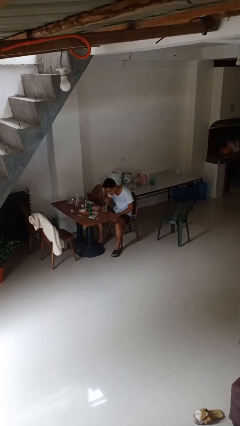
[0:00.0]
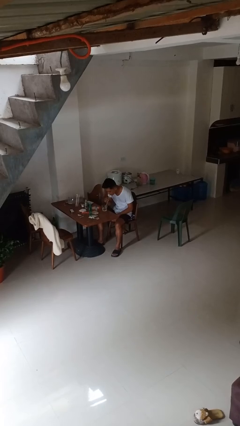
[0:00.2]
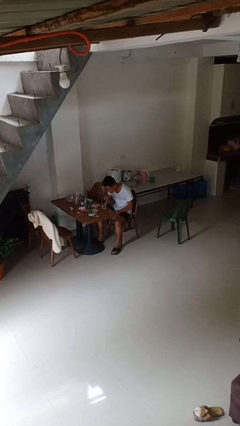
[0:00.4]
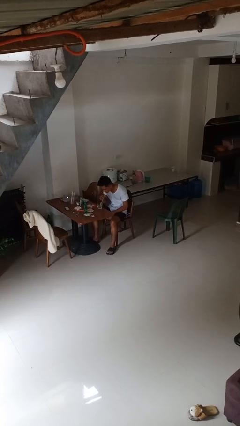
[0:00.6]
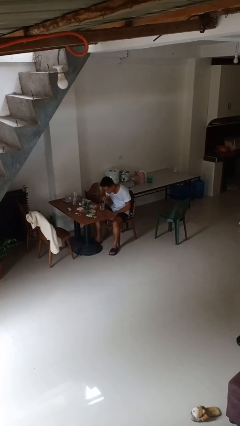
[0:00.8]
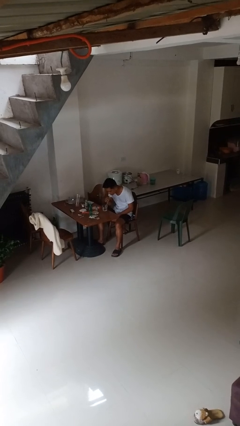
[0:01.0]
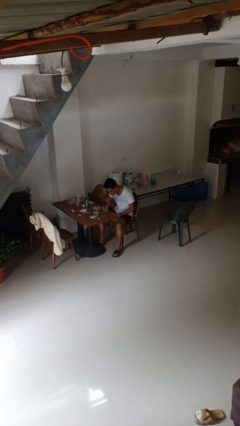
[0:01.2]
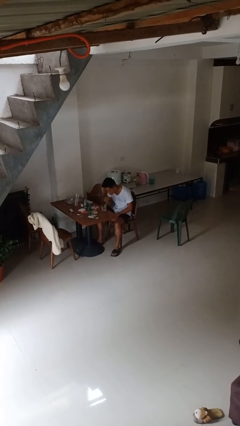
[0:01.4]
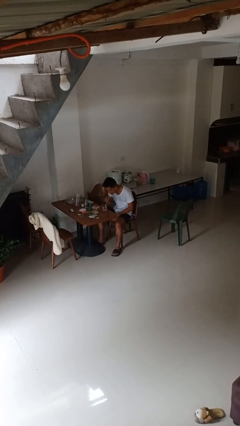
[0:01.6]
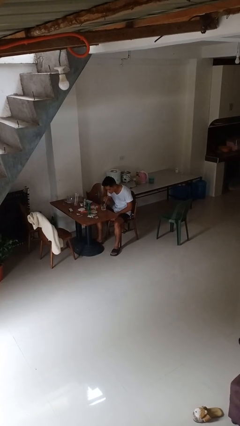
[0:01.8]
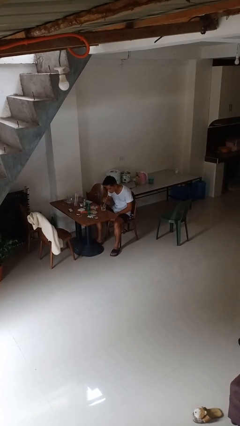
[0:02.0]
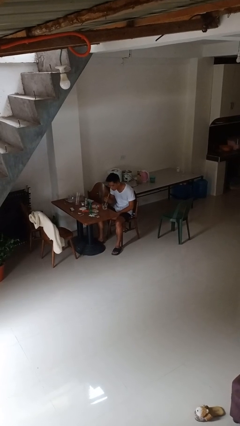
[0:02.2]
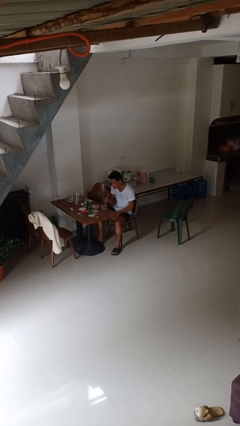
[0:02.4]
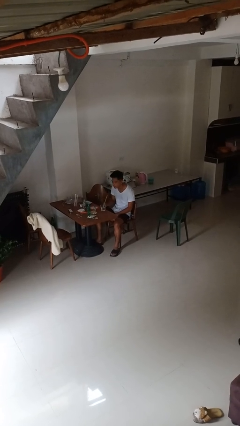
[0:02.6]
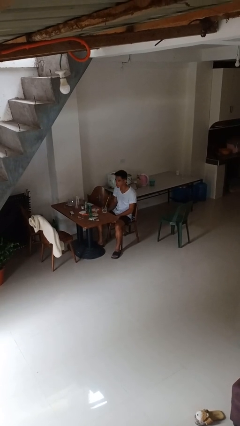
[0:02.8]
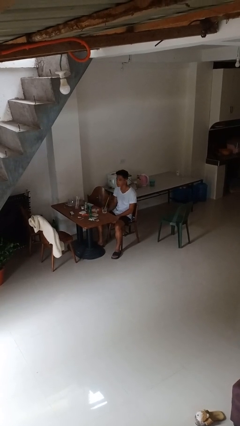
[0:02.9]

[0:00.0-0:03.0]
person drinks from straw

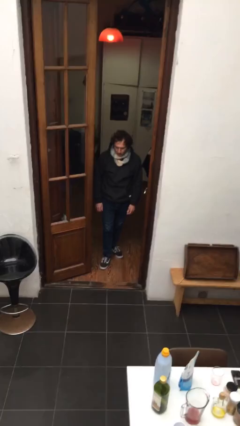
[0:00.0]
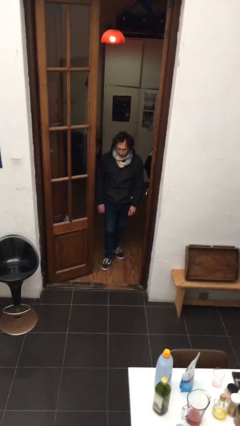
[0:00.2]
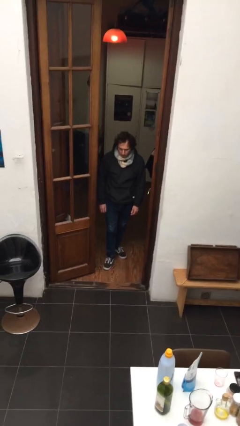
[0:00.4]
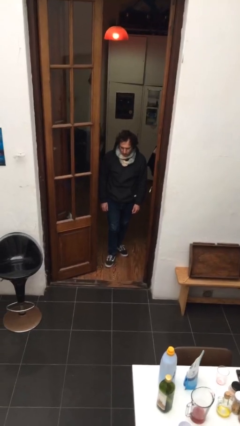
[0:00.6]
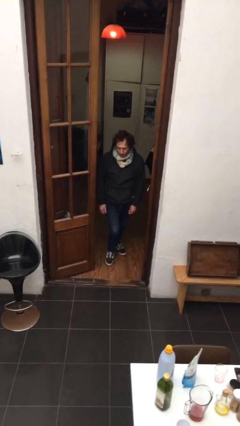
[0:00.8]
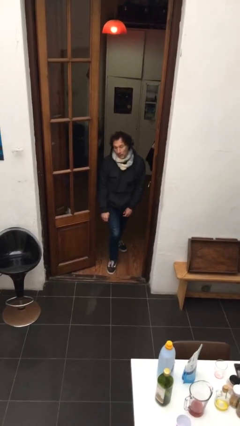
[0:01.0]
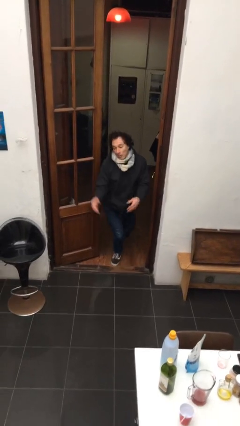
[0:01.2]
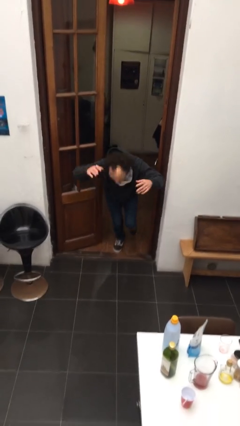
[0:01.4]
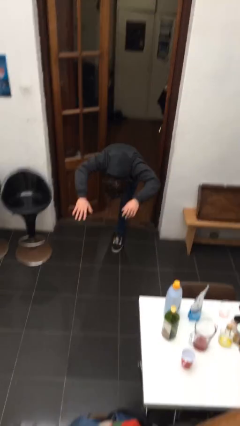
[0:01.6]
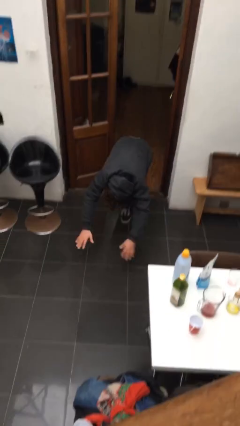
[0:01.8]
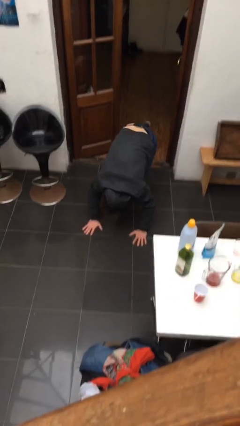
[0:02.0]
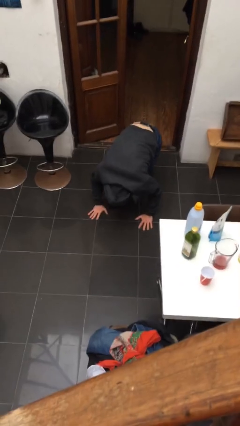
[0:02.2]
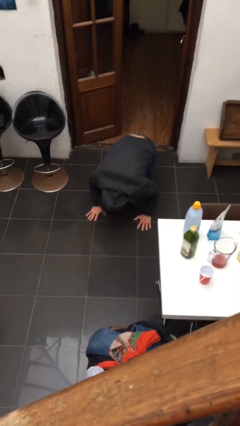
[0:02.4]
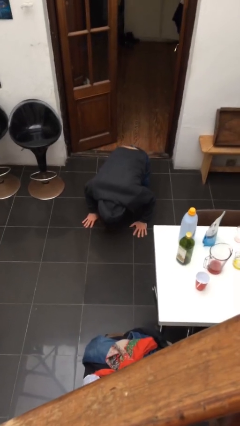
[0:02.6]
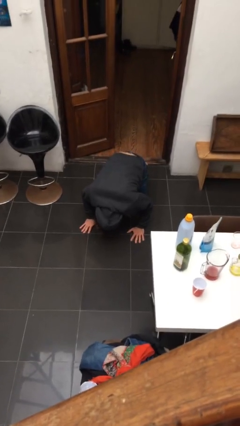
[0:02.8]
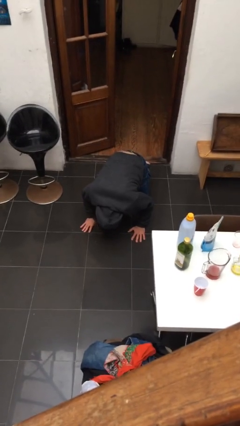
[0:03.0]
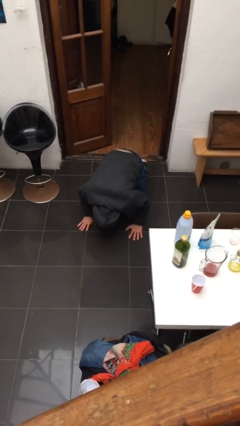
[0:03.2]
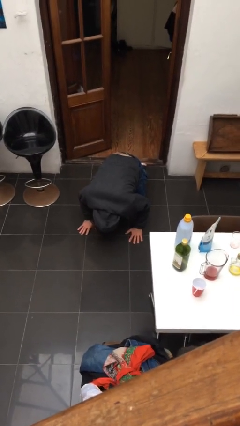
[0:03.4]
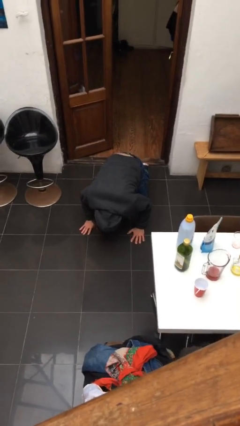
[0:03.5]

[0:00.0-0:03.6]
person trips on object on floor

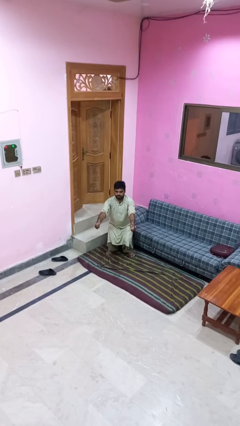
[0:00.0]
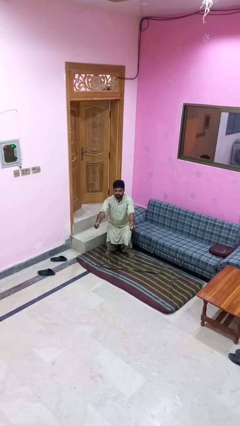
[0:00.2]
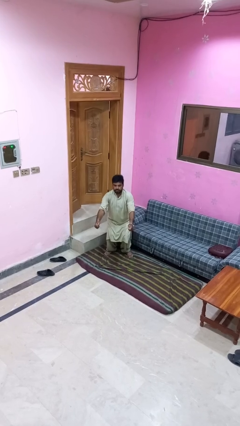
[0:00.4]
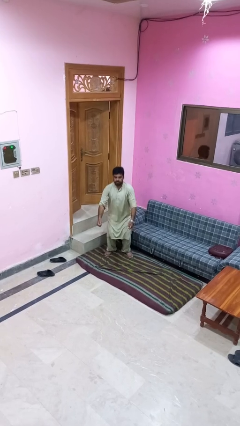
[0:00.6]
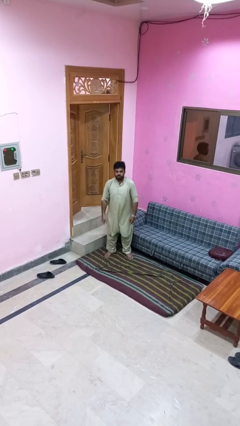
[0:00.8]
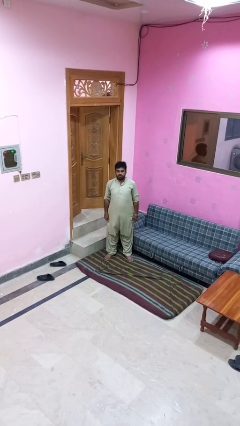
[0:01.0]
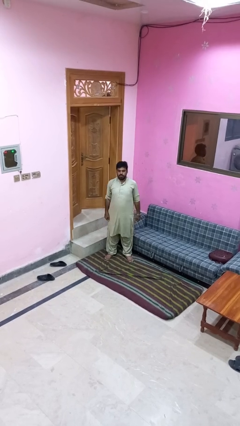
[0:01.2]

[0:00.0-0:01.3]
person stands up

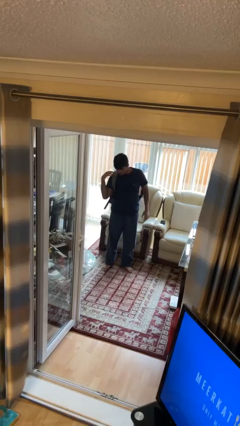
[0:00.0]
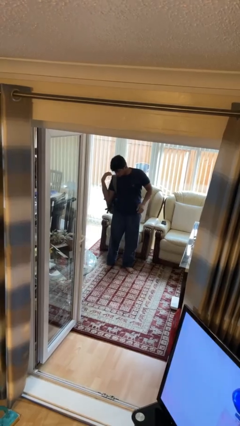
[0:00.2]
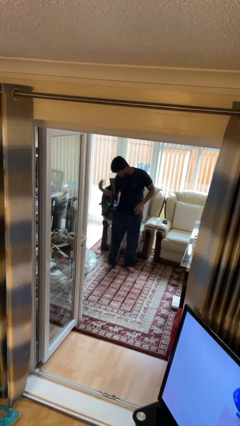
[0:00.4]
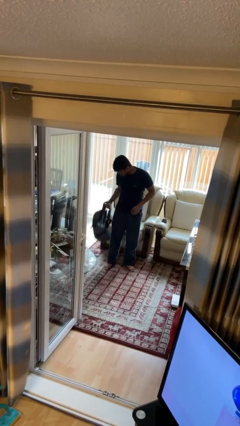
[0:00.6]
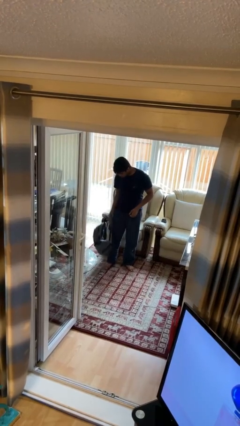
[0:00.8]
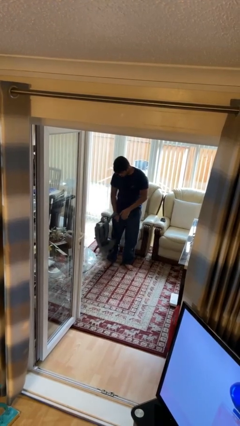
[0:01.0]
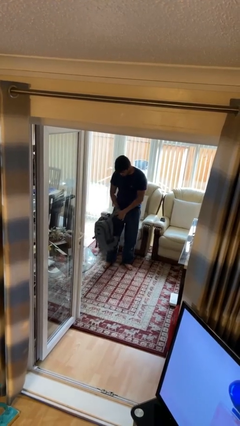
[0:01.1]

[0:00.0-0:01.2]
person takes off backpack

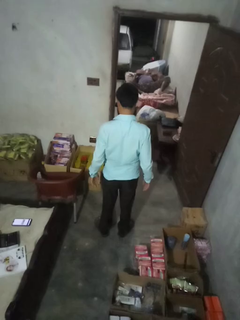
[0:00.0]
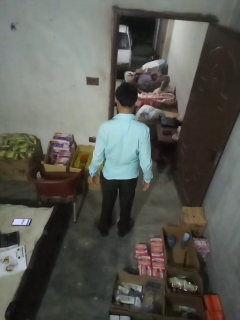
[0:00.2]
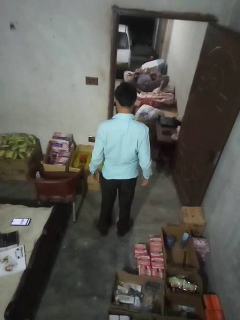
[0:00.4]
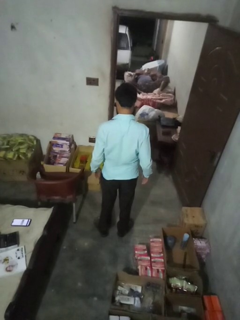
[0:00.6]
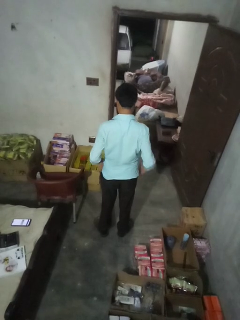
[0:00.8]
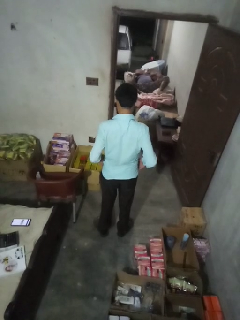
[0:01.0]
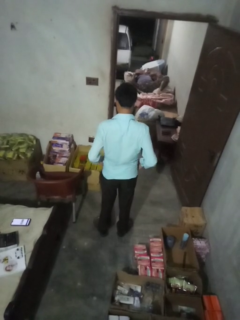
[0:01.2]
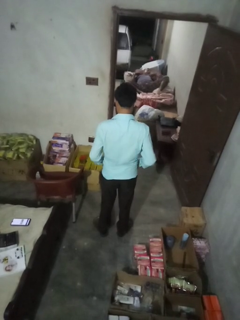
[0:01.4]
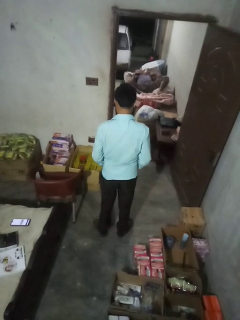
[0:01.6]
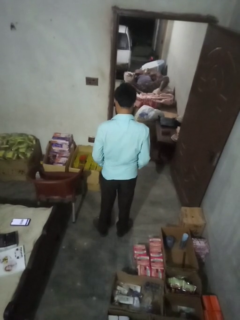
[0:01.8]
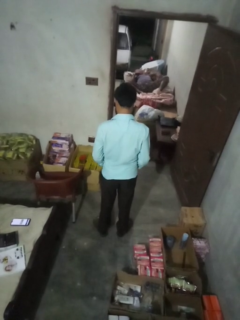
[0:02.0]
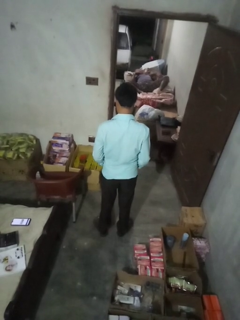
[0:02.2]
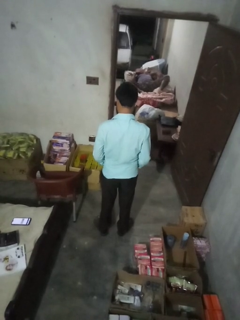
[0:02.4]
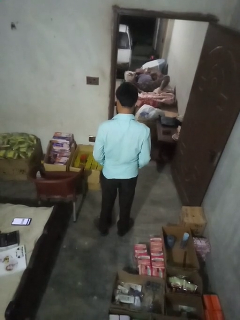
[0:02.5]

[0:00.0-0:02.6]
person puts hands in back pockets

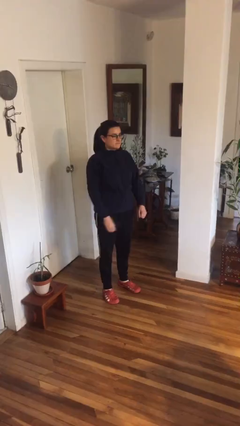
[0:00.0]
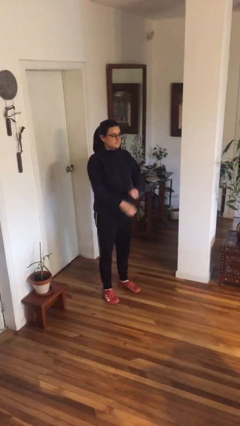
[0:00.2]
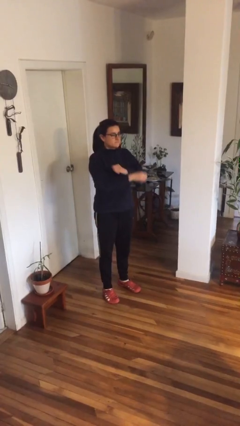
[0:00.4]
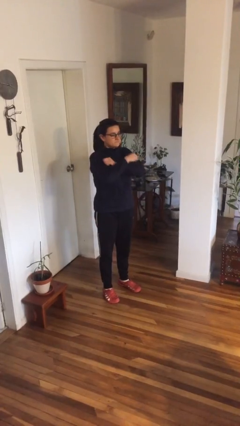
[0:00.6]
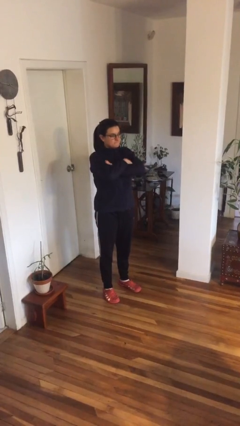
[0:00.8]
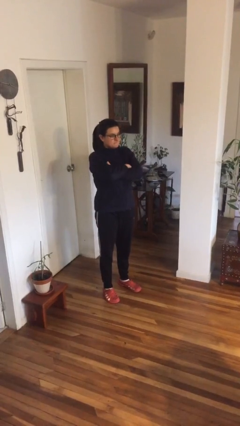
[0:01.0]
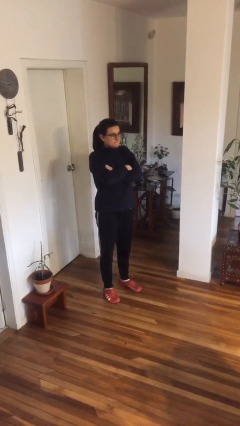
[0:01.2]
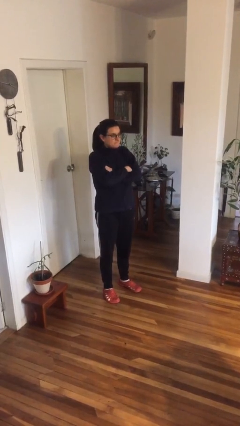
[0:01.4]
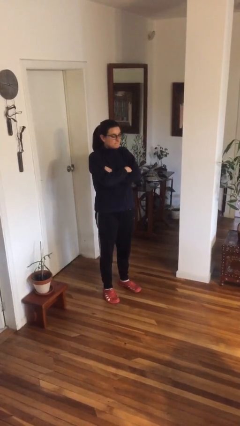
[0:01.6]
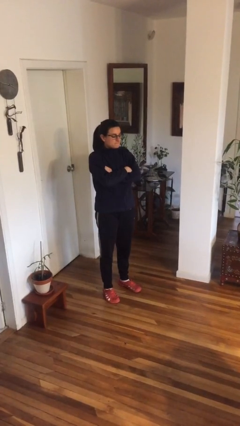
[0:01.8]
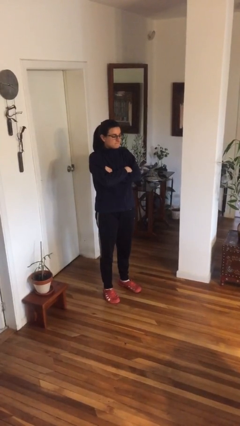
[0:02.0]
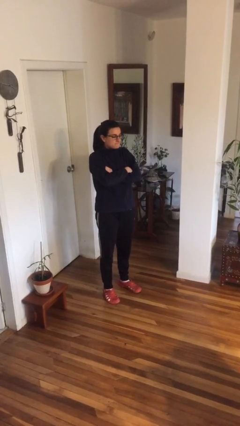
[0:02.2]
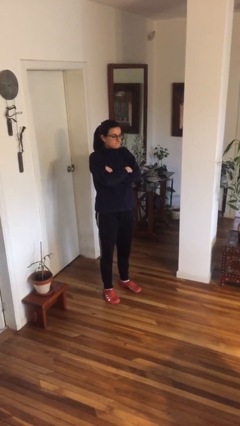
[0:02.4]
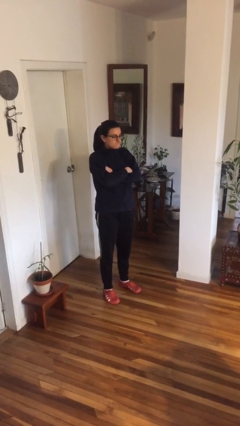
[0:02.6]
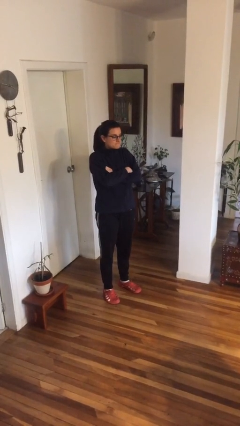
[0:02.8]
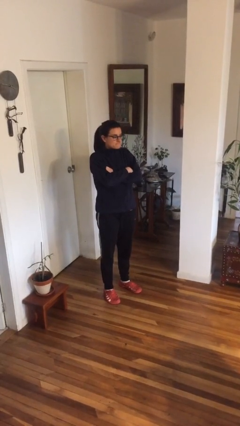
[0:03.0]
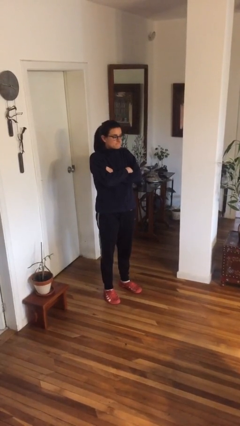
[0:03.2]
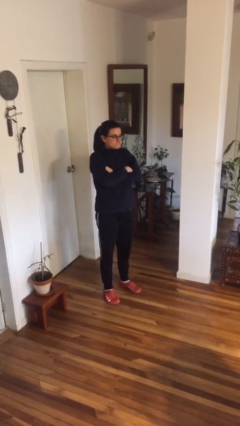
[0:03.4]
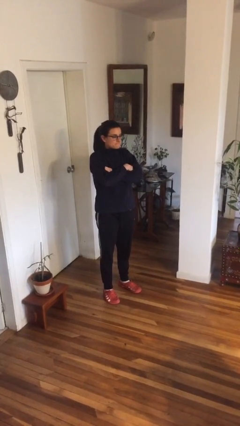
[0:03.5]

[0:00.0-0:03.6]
person crosses arms

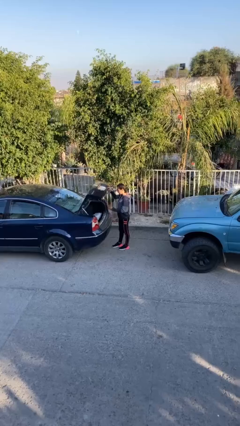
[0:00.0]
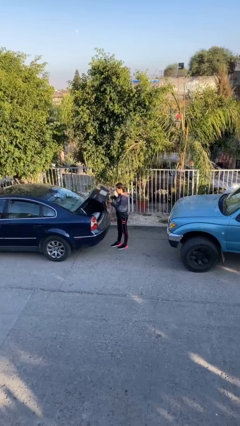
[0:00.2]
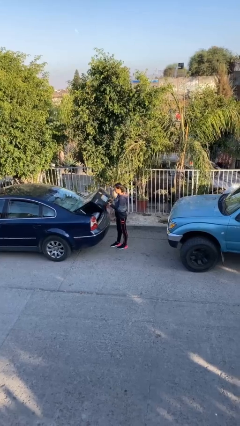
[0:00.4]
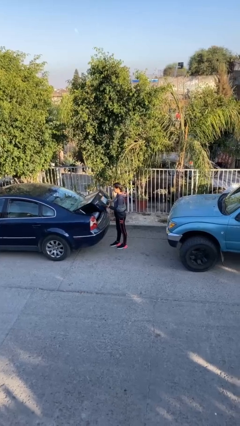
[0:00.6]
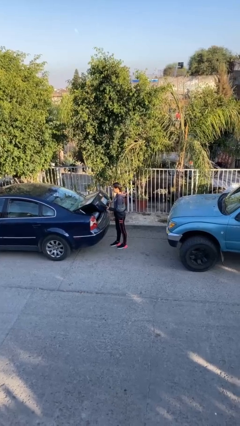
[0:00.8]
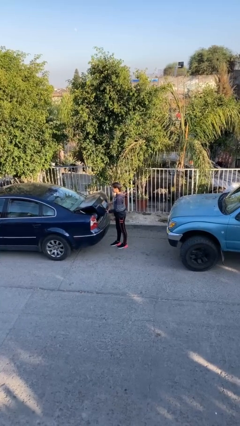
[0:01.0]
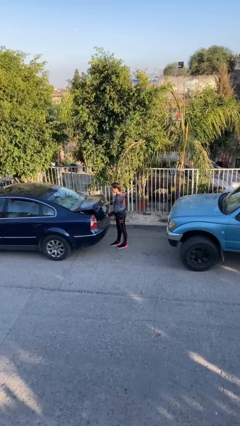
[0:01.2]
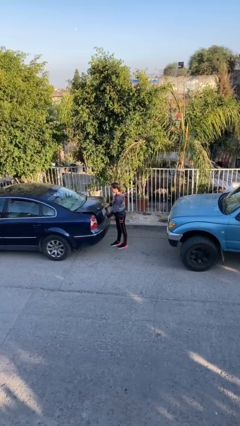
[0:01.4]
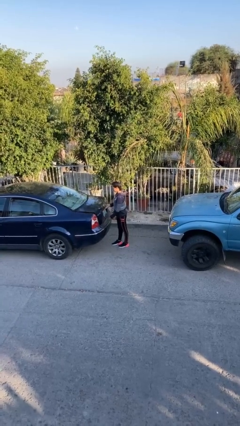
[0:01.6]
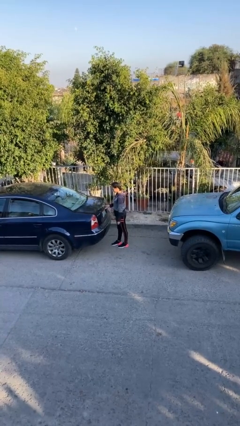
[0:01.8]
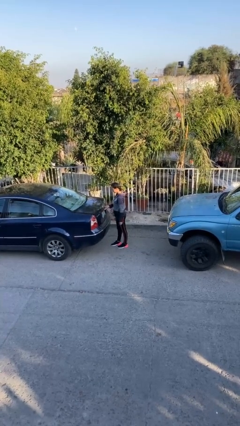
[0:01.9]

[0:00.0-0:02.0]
person closes car trunk

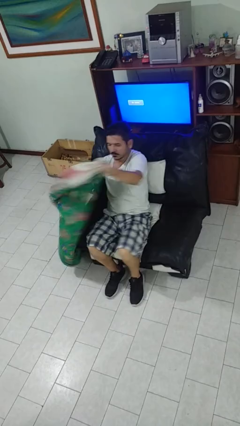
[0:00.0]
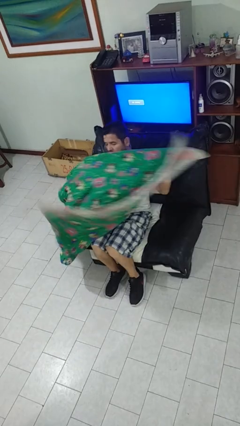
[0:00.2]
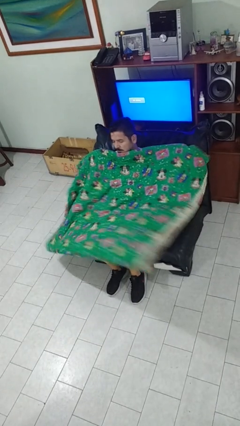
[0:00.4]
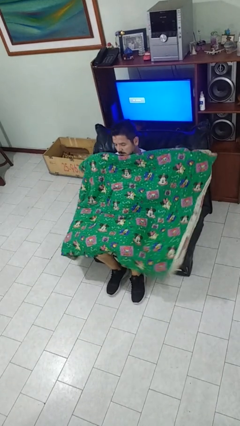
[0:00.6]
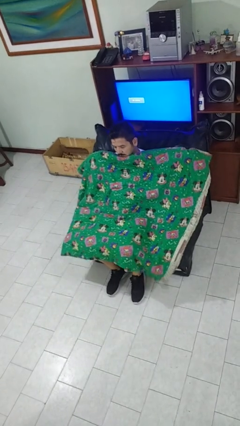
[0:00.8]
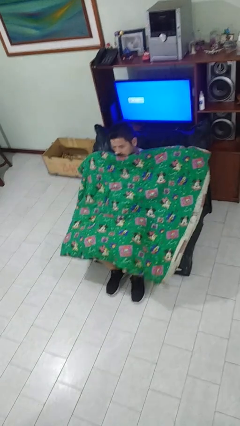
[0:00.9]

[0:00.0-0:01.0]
person covers with blanket
